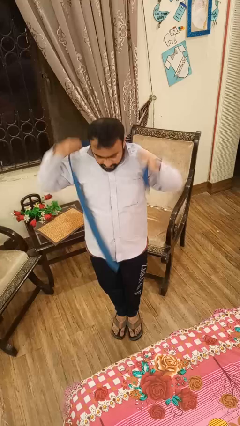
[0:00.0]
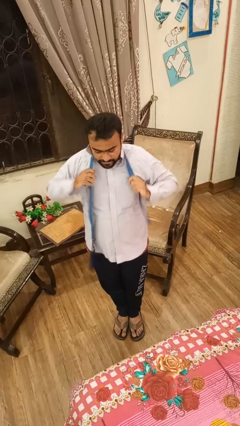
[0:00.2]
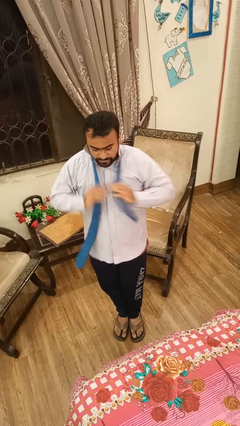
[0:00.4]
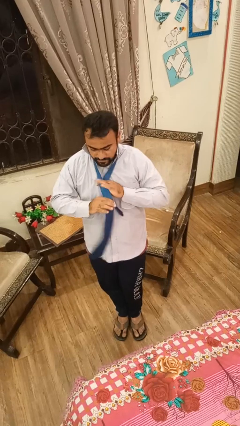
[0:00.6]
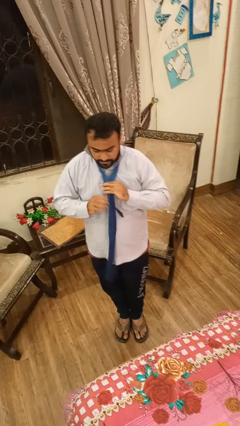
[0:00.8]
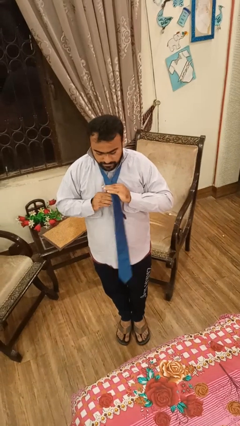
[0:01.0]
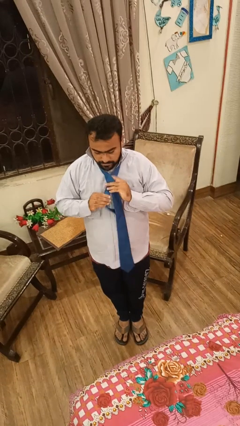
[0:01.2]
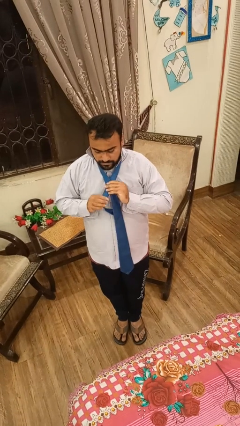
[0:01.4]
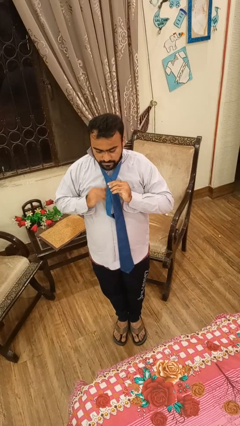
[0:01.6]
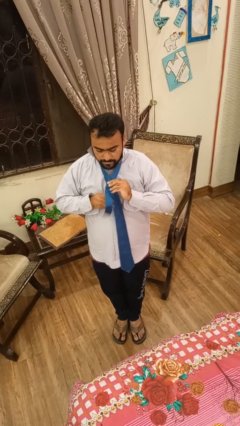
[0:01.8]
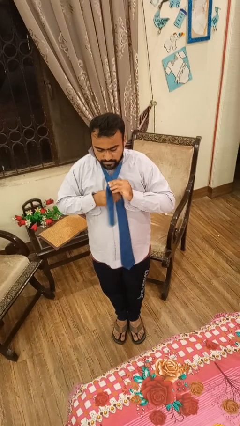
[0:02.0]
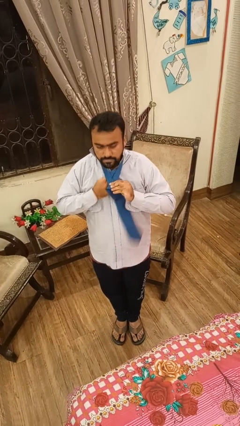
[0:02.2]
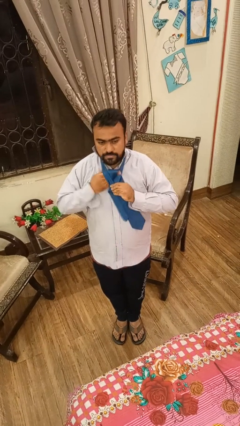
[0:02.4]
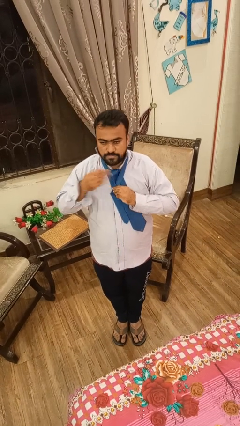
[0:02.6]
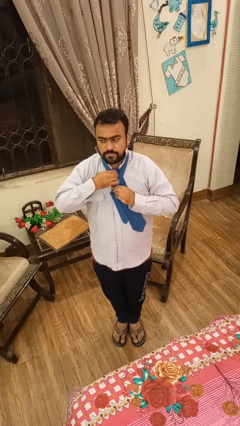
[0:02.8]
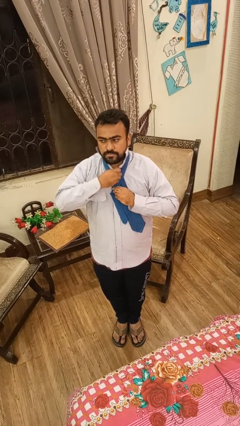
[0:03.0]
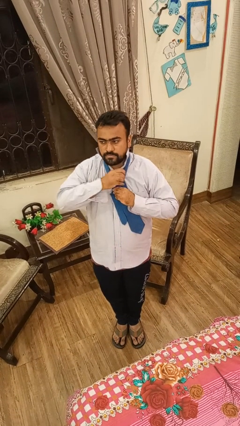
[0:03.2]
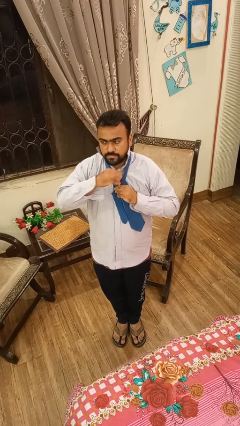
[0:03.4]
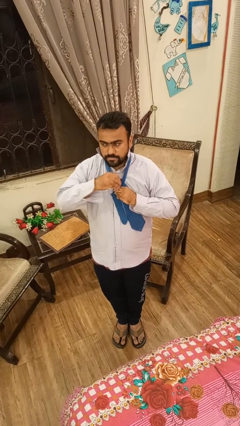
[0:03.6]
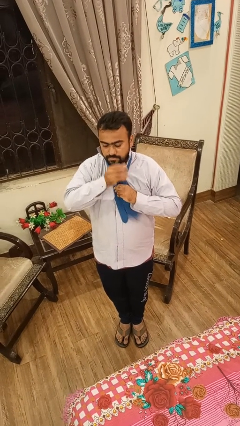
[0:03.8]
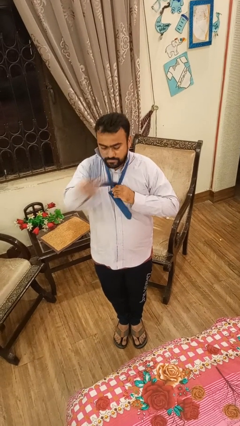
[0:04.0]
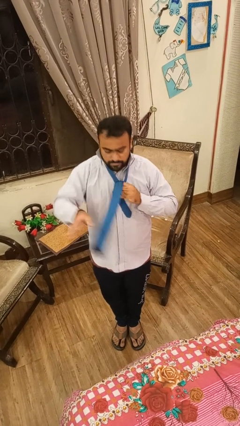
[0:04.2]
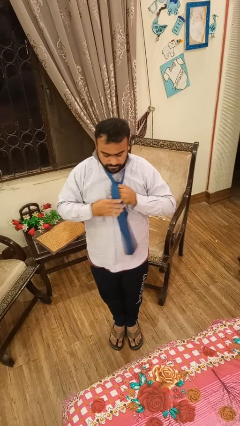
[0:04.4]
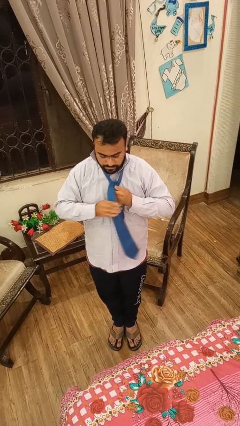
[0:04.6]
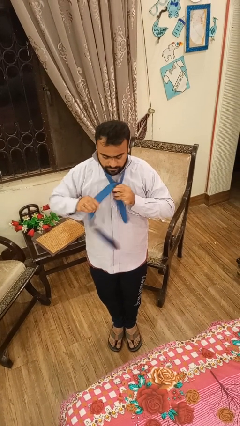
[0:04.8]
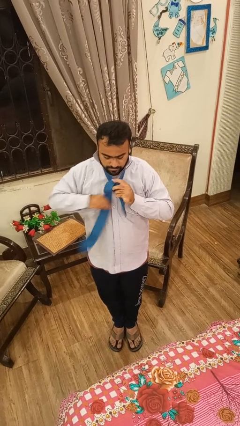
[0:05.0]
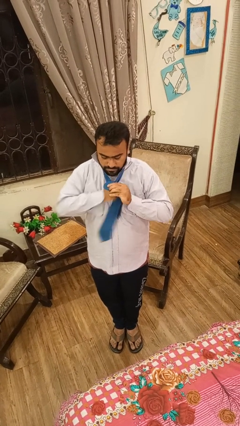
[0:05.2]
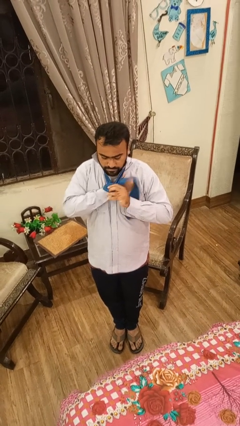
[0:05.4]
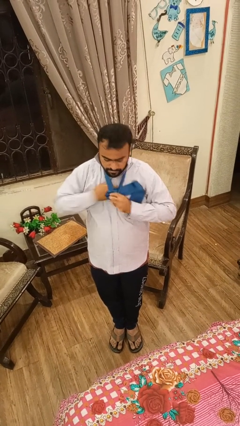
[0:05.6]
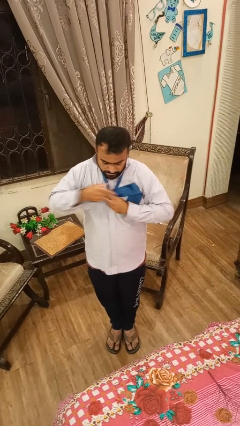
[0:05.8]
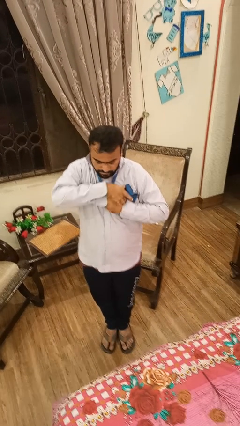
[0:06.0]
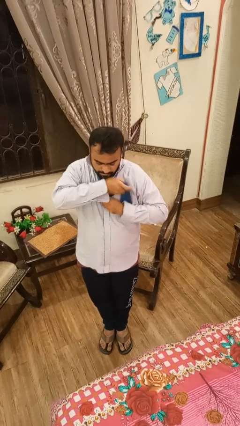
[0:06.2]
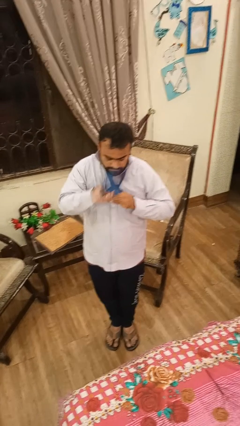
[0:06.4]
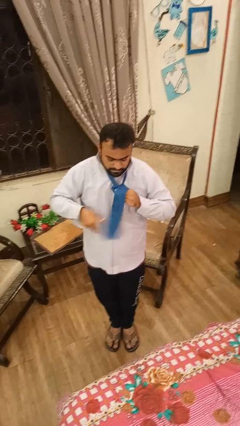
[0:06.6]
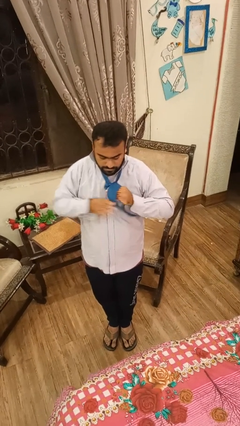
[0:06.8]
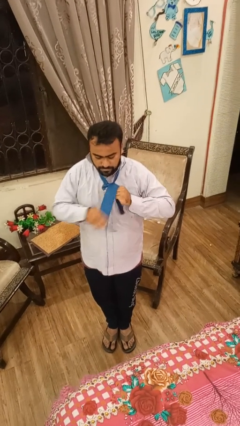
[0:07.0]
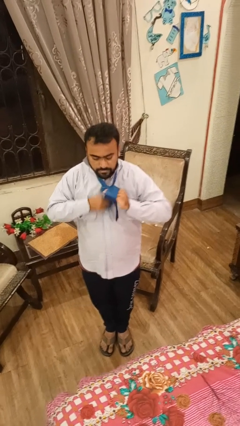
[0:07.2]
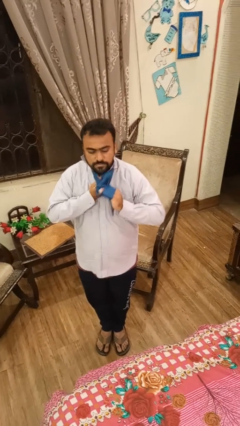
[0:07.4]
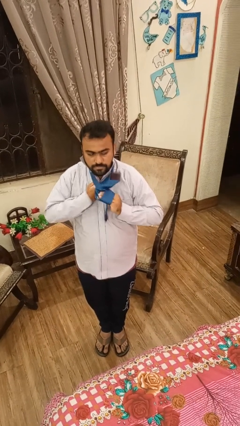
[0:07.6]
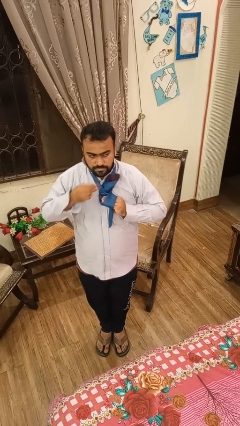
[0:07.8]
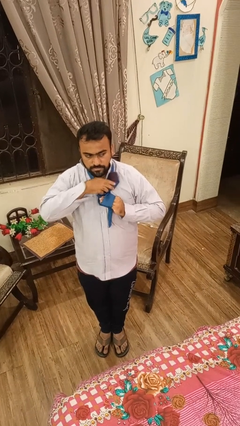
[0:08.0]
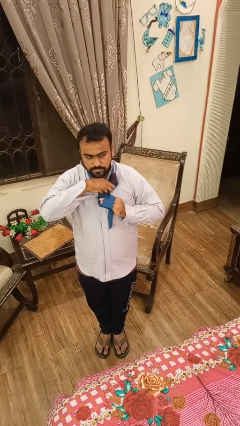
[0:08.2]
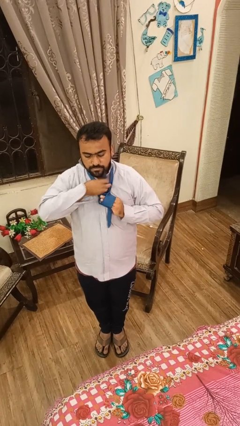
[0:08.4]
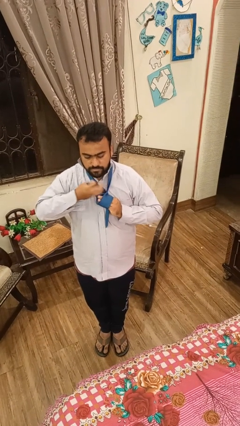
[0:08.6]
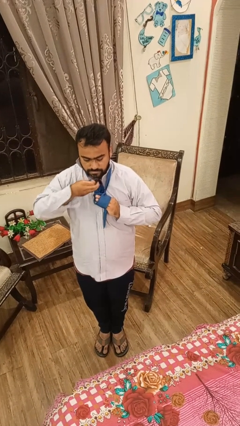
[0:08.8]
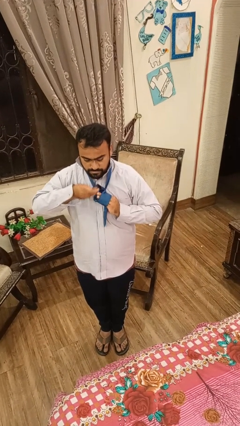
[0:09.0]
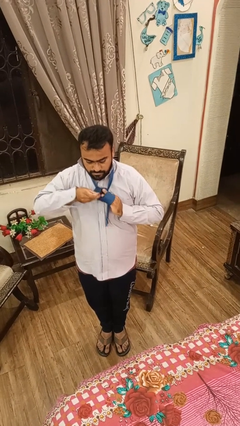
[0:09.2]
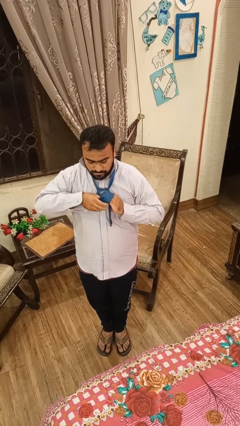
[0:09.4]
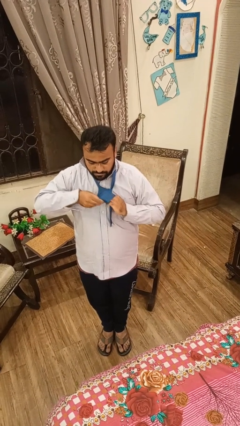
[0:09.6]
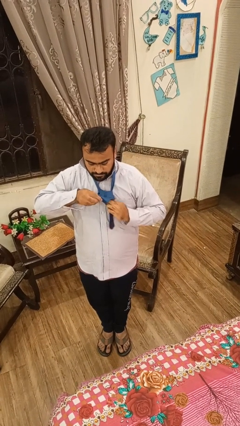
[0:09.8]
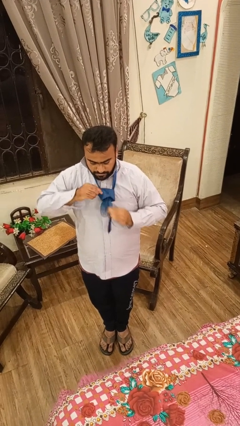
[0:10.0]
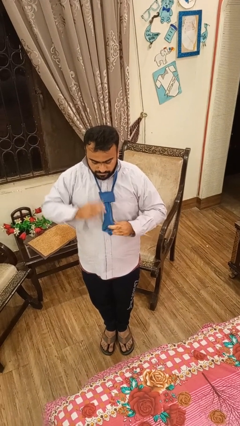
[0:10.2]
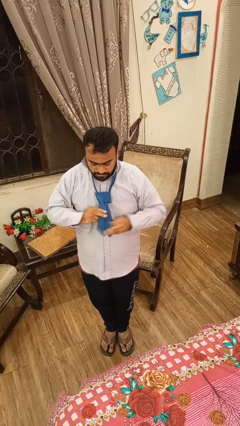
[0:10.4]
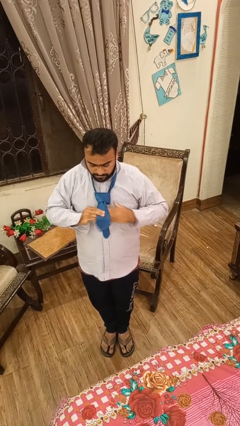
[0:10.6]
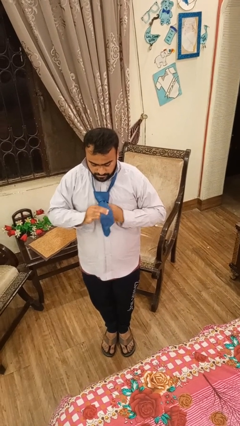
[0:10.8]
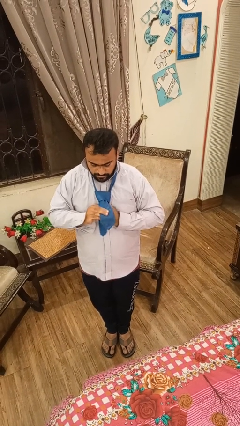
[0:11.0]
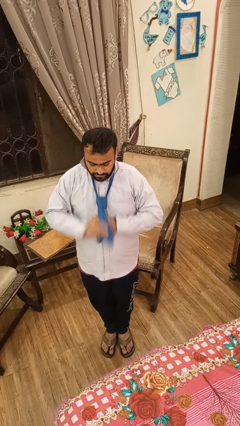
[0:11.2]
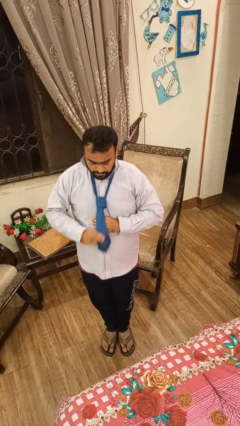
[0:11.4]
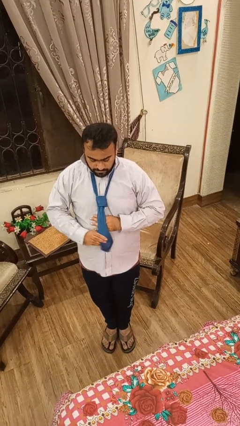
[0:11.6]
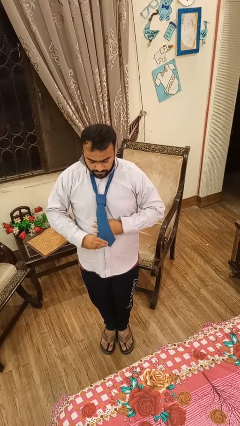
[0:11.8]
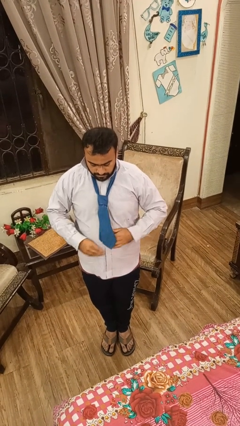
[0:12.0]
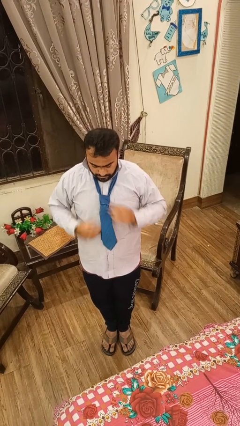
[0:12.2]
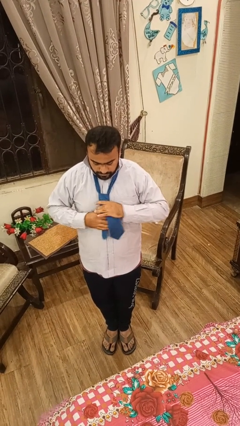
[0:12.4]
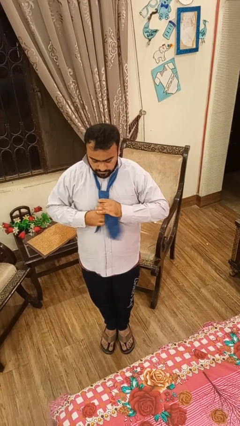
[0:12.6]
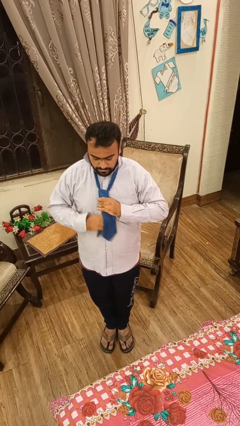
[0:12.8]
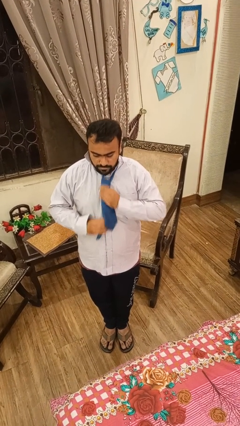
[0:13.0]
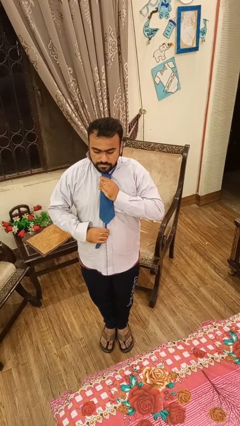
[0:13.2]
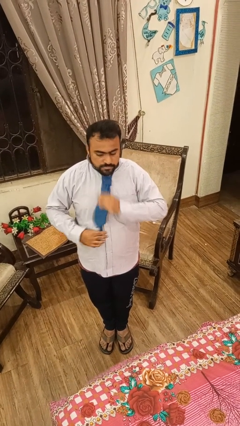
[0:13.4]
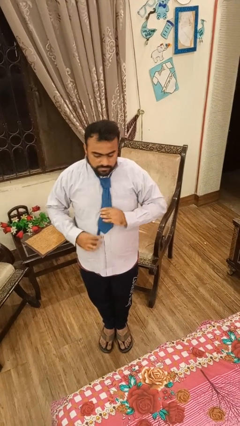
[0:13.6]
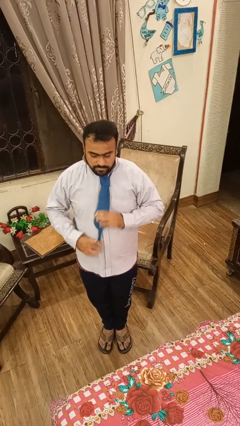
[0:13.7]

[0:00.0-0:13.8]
person puts on necktie

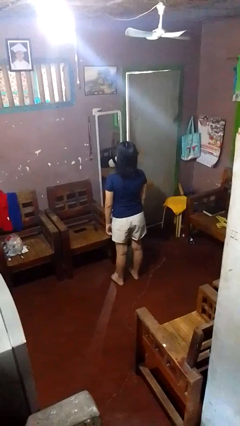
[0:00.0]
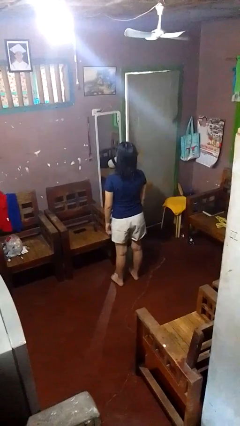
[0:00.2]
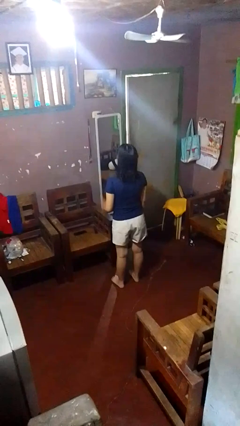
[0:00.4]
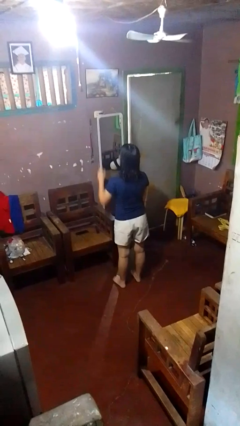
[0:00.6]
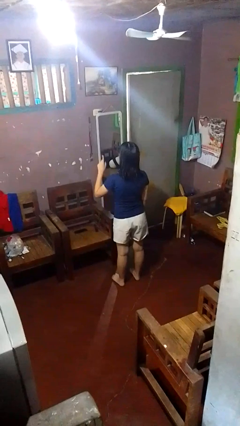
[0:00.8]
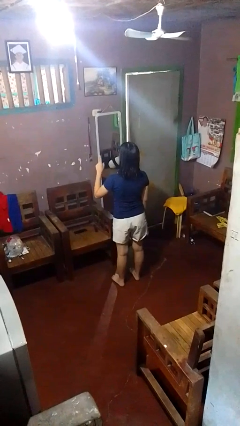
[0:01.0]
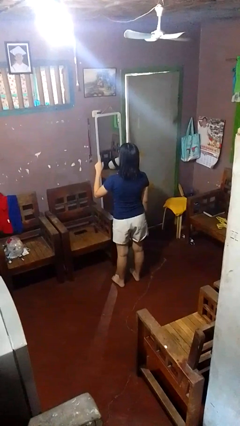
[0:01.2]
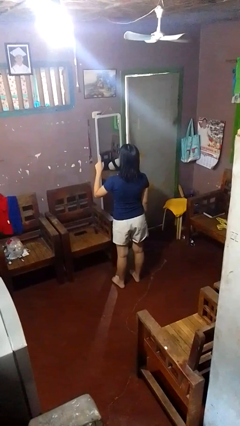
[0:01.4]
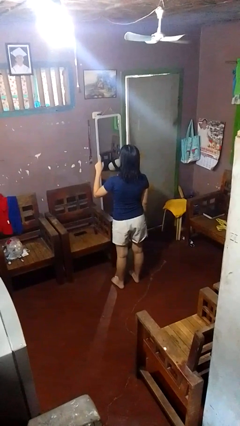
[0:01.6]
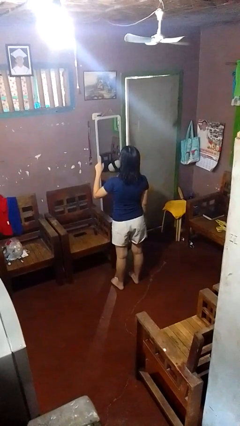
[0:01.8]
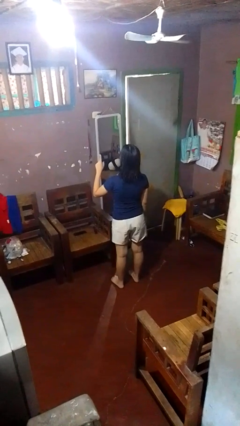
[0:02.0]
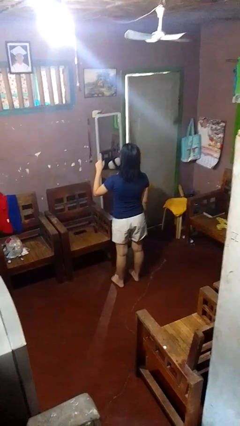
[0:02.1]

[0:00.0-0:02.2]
person gestures number one

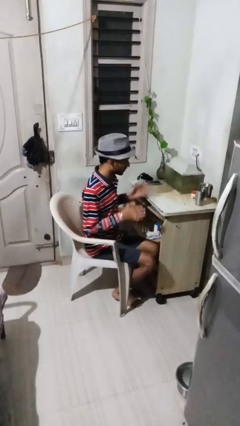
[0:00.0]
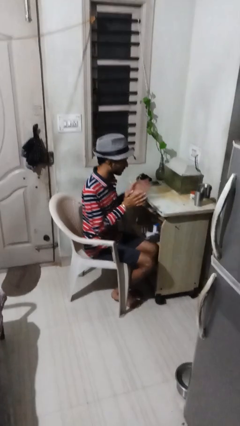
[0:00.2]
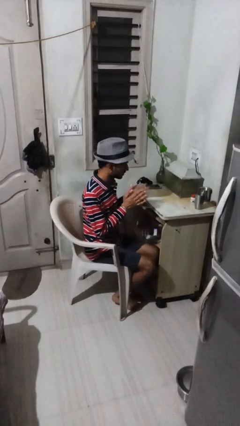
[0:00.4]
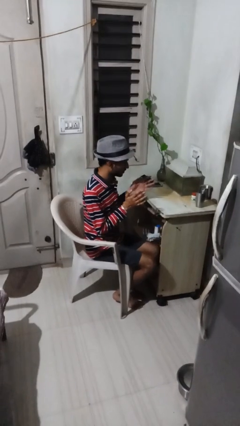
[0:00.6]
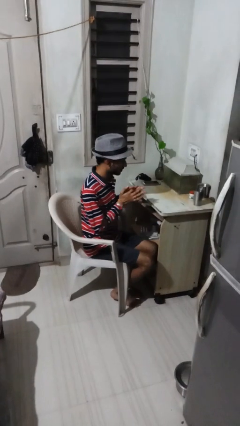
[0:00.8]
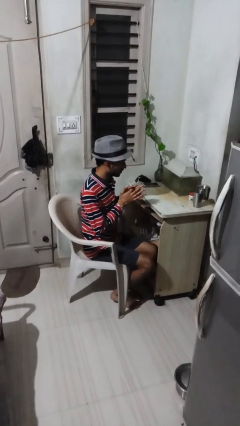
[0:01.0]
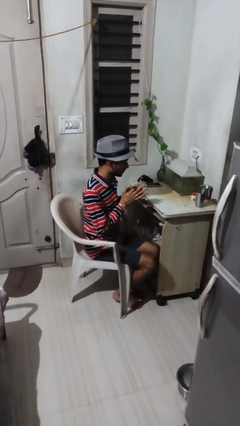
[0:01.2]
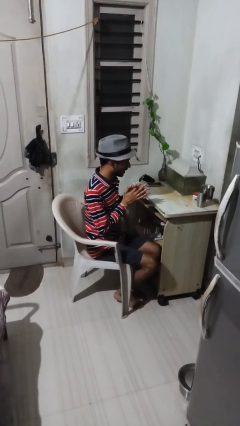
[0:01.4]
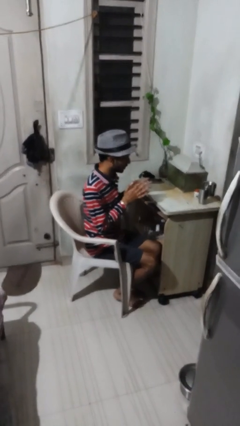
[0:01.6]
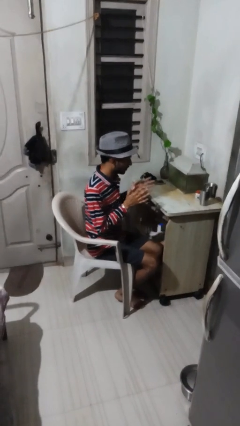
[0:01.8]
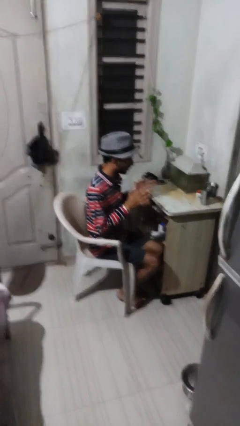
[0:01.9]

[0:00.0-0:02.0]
person claps hands
